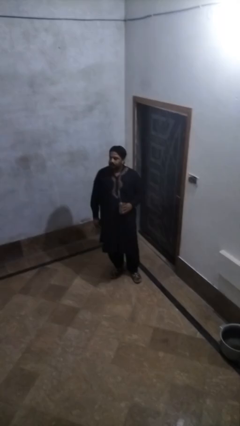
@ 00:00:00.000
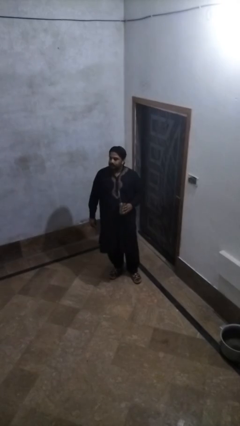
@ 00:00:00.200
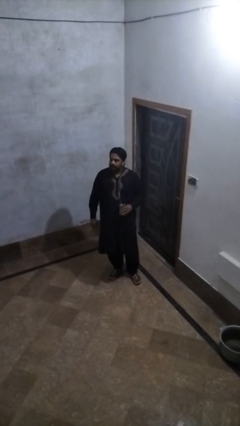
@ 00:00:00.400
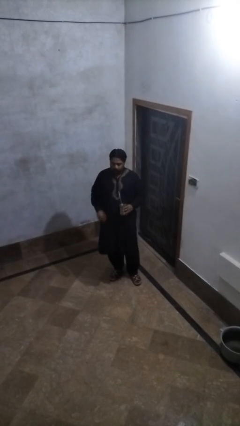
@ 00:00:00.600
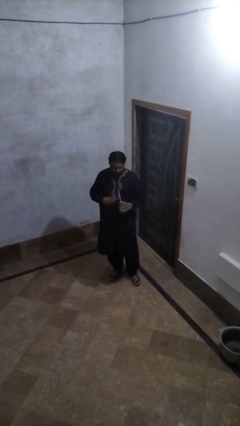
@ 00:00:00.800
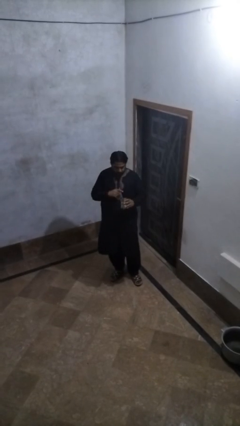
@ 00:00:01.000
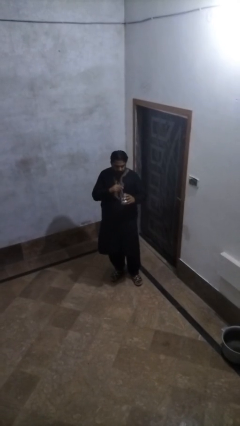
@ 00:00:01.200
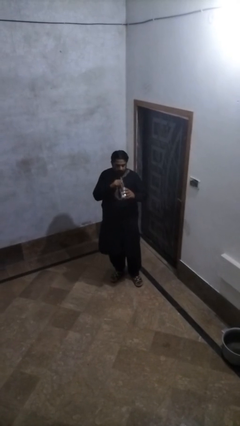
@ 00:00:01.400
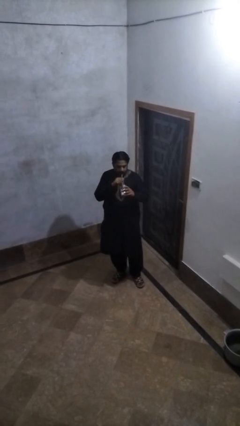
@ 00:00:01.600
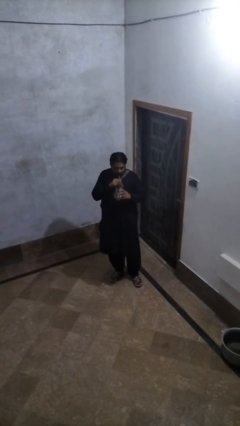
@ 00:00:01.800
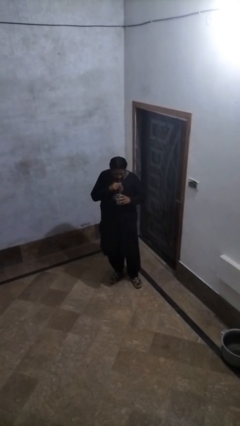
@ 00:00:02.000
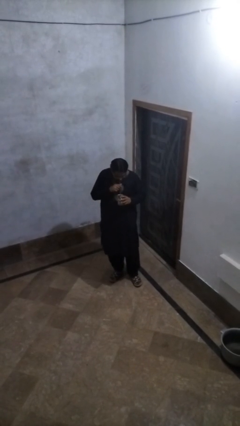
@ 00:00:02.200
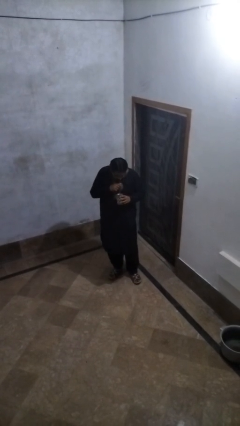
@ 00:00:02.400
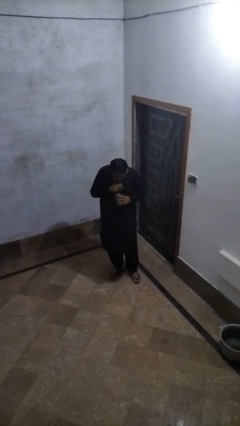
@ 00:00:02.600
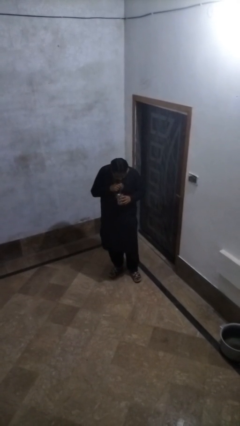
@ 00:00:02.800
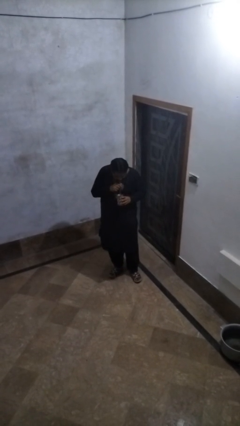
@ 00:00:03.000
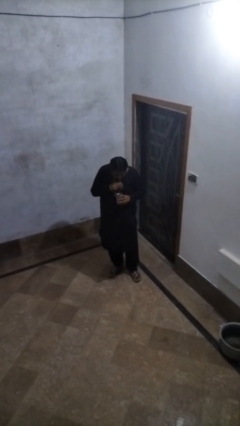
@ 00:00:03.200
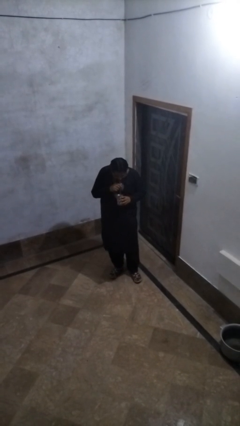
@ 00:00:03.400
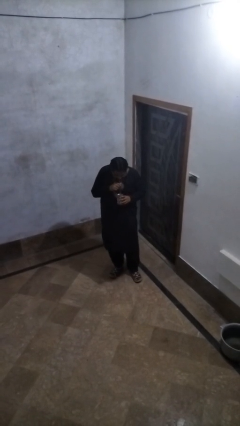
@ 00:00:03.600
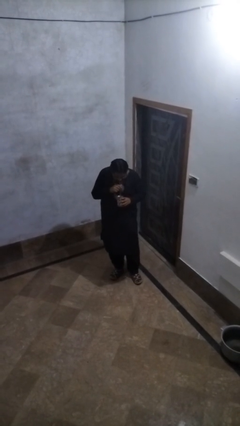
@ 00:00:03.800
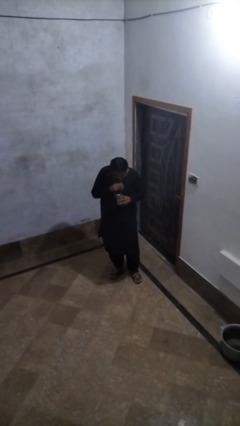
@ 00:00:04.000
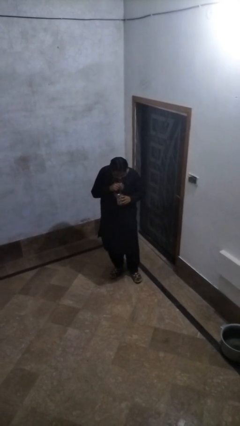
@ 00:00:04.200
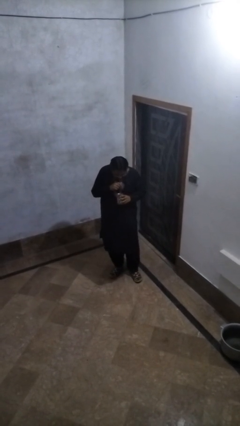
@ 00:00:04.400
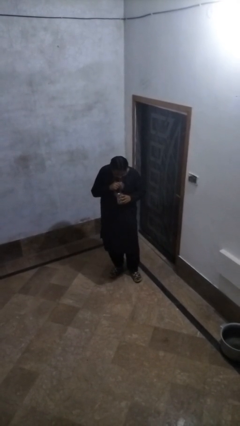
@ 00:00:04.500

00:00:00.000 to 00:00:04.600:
person drinks from straw

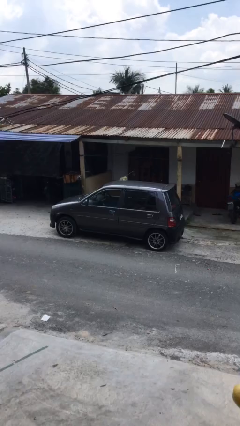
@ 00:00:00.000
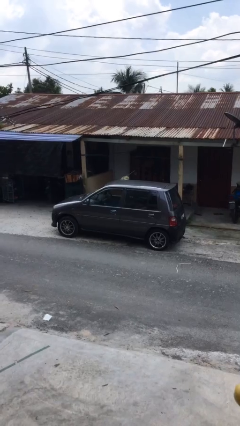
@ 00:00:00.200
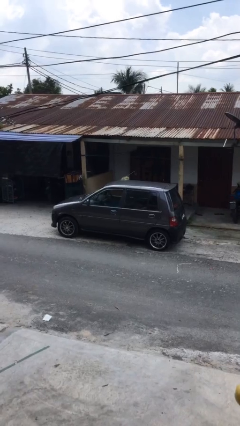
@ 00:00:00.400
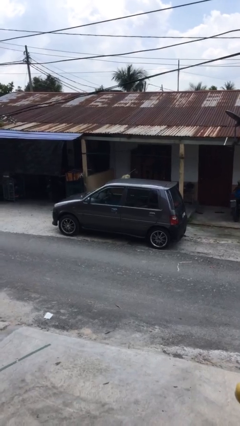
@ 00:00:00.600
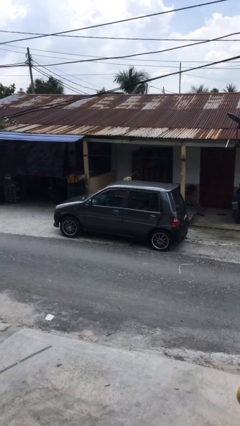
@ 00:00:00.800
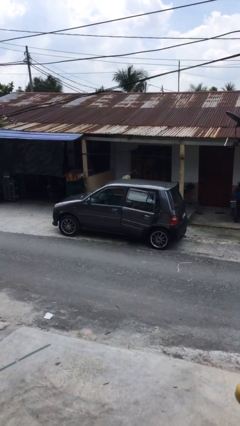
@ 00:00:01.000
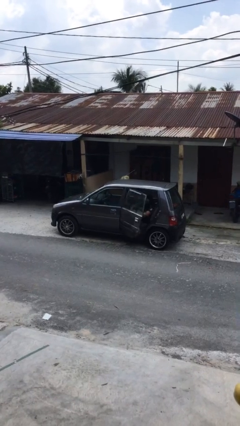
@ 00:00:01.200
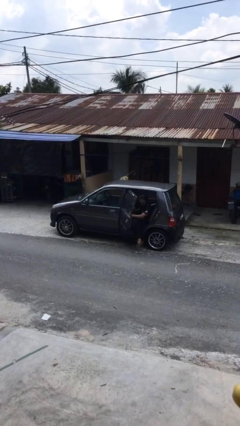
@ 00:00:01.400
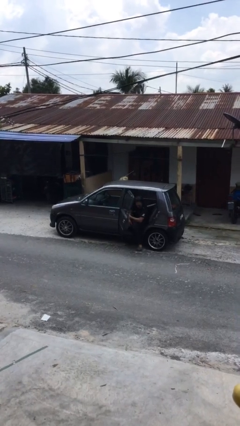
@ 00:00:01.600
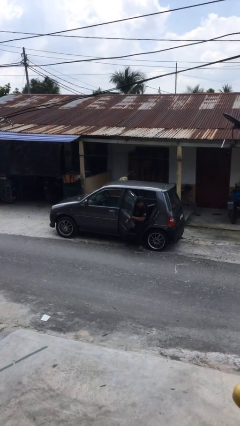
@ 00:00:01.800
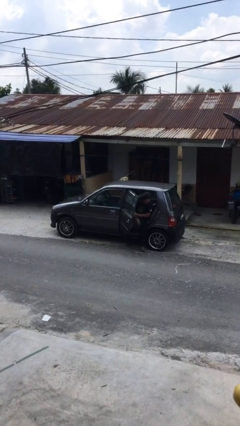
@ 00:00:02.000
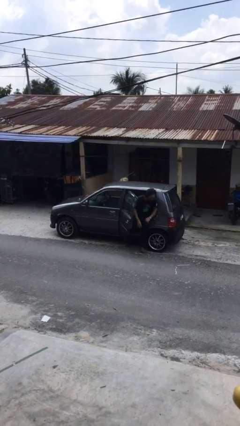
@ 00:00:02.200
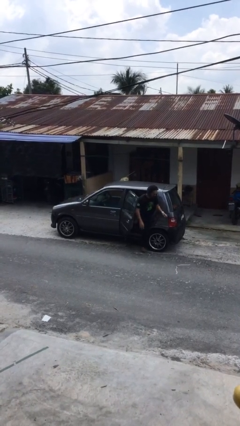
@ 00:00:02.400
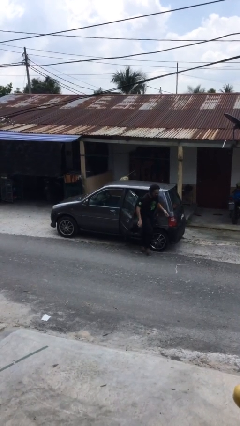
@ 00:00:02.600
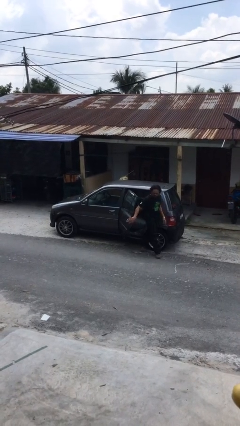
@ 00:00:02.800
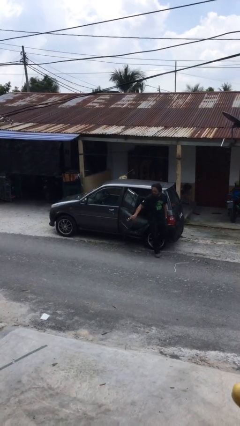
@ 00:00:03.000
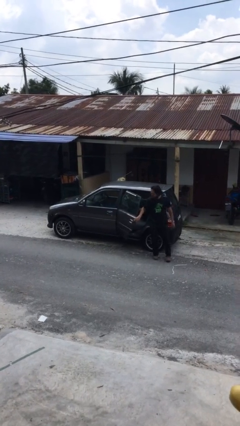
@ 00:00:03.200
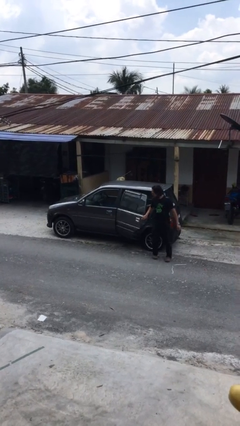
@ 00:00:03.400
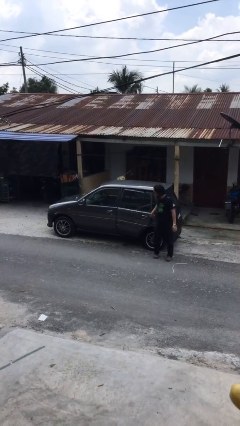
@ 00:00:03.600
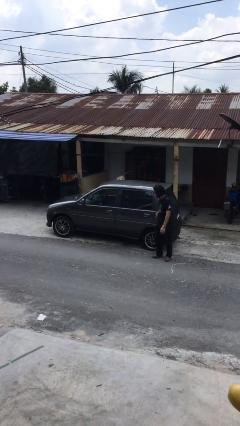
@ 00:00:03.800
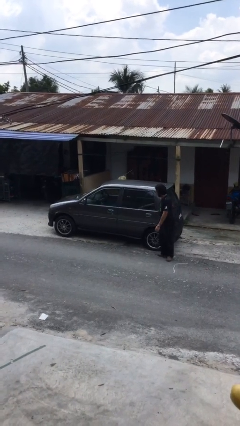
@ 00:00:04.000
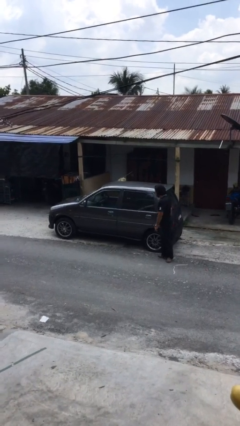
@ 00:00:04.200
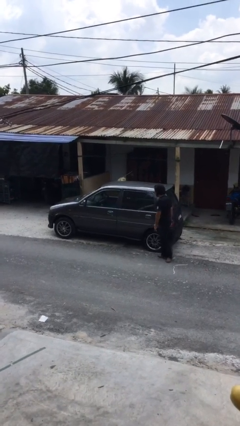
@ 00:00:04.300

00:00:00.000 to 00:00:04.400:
car drops off person

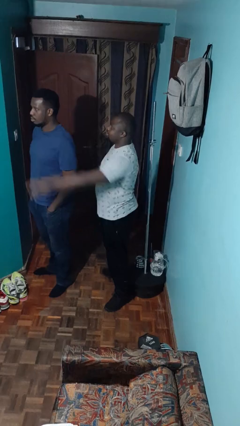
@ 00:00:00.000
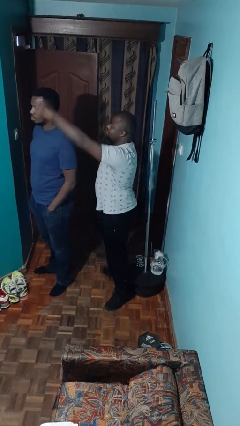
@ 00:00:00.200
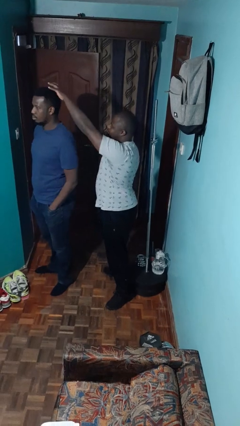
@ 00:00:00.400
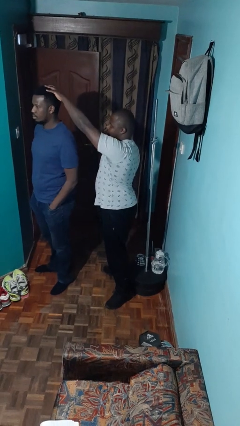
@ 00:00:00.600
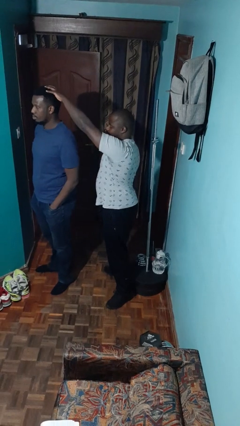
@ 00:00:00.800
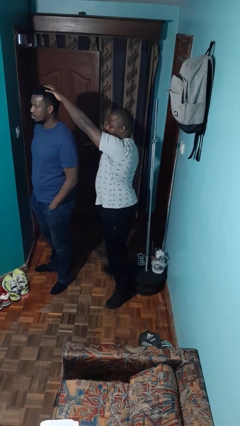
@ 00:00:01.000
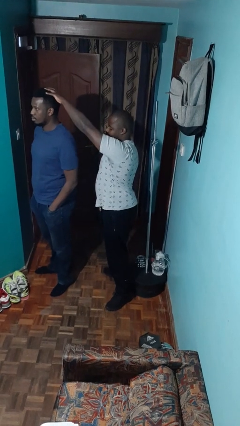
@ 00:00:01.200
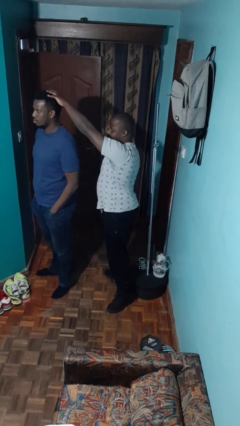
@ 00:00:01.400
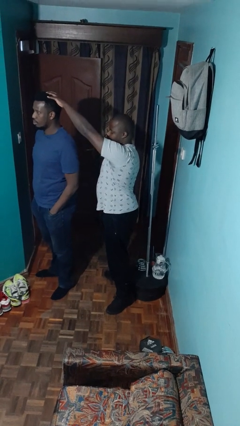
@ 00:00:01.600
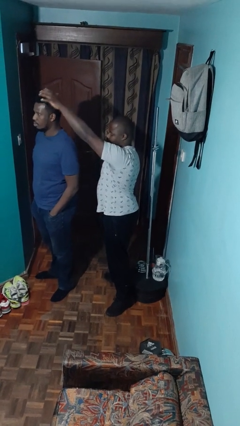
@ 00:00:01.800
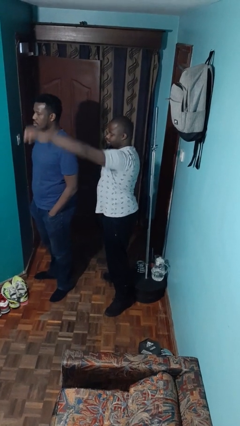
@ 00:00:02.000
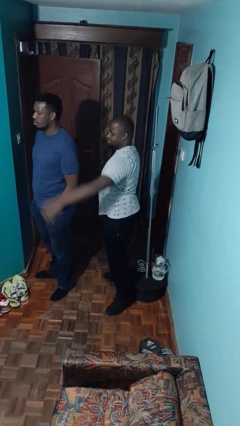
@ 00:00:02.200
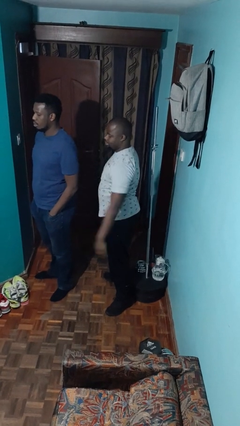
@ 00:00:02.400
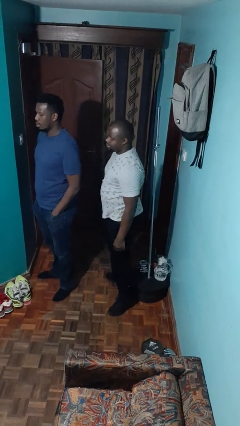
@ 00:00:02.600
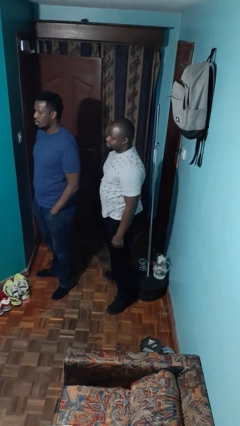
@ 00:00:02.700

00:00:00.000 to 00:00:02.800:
person grabs person by hair

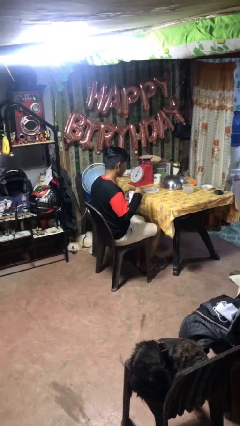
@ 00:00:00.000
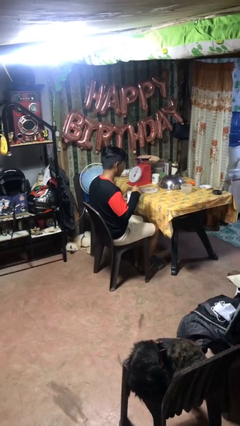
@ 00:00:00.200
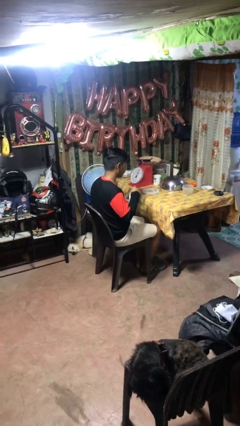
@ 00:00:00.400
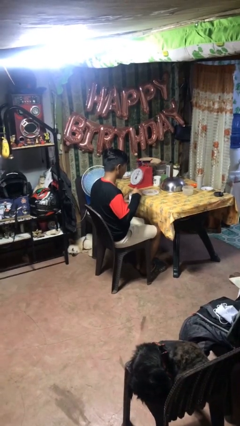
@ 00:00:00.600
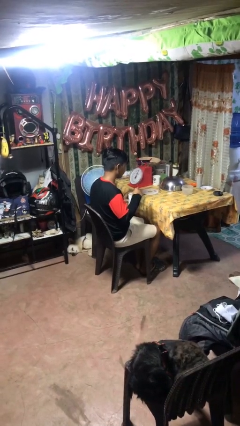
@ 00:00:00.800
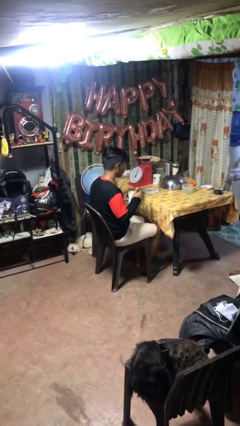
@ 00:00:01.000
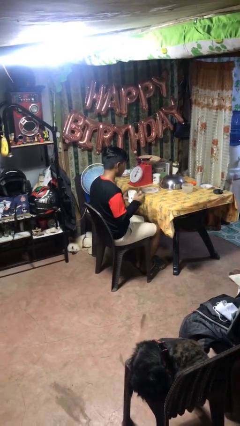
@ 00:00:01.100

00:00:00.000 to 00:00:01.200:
person stirs mug

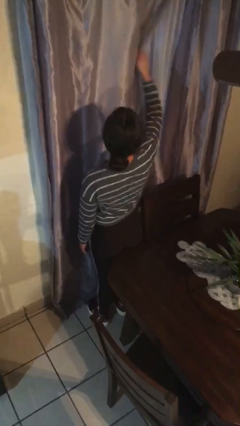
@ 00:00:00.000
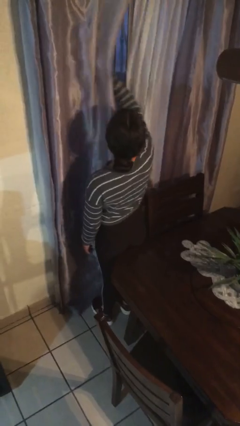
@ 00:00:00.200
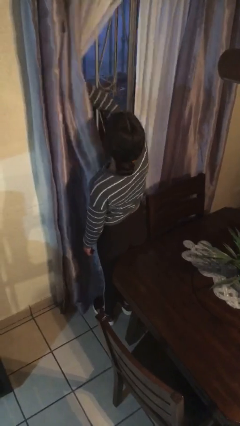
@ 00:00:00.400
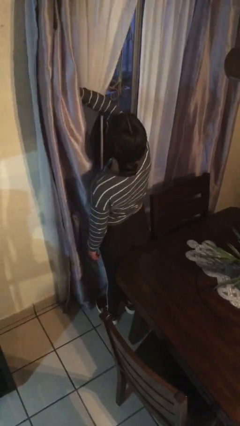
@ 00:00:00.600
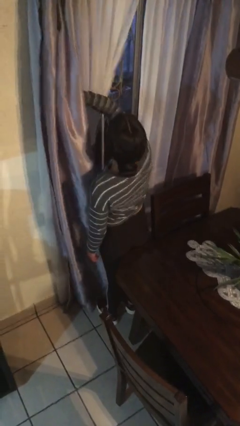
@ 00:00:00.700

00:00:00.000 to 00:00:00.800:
person opens curtains

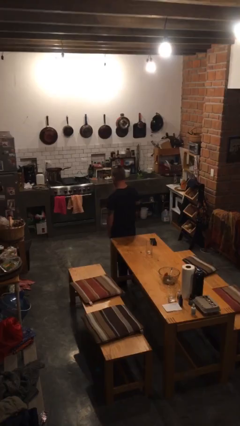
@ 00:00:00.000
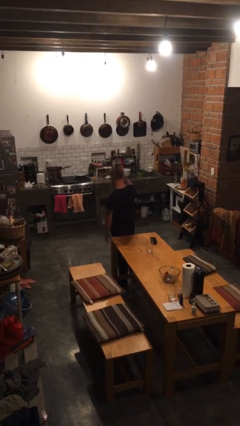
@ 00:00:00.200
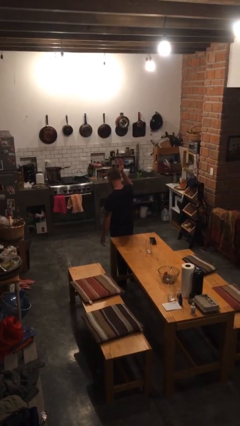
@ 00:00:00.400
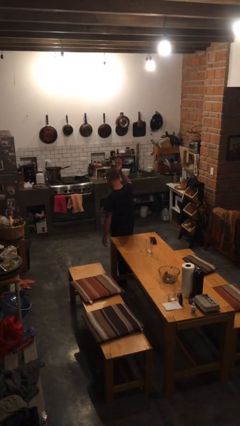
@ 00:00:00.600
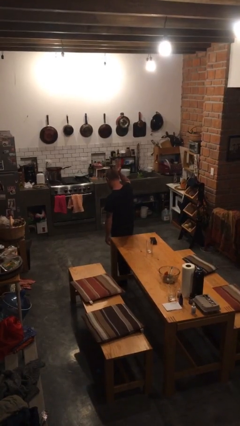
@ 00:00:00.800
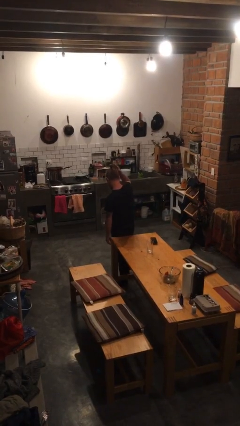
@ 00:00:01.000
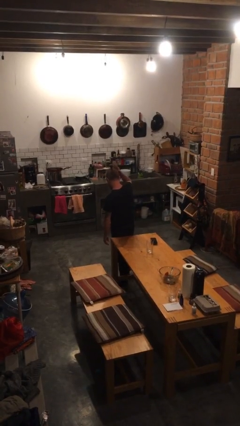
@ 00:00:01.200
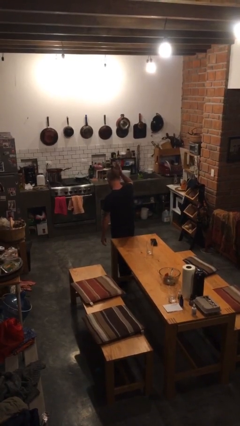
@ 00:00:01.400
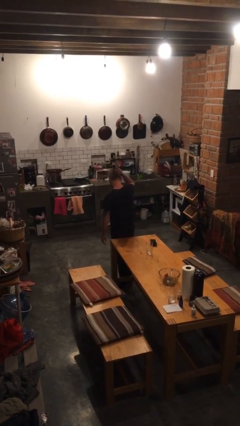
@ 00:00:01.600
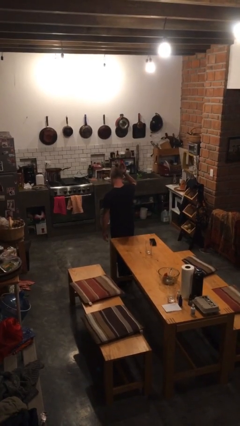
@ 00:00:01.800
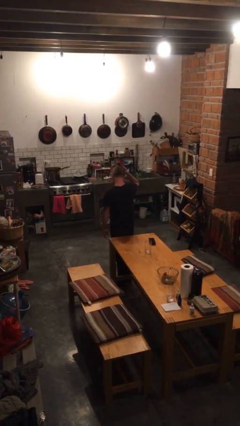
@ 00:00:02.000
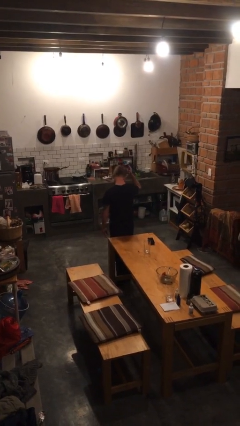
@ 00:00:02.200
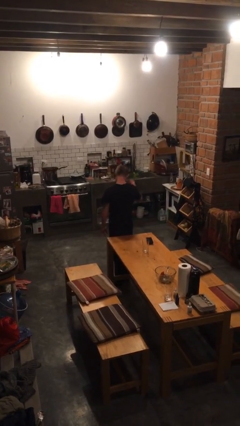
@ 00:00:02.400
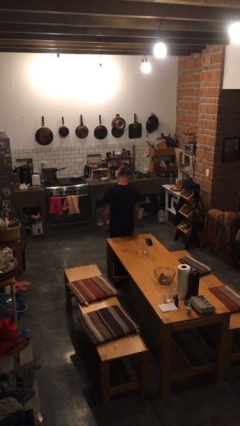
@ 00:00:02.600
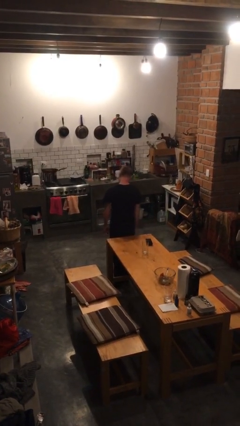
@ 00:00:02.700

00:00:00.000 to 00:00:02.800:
person pats head

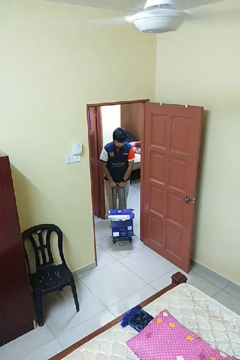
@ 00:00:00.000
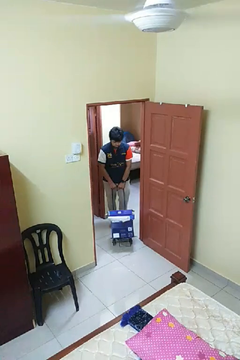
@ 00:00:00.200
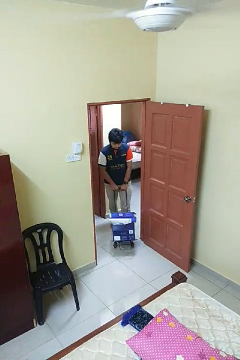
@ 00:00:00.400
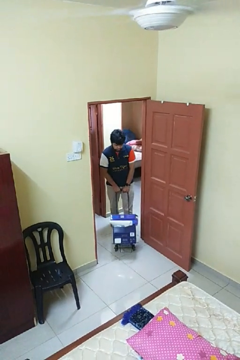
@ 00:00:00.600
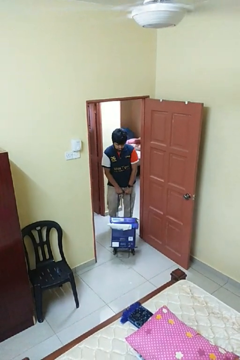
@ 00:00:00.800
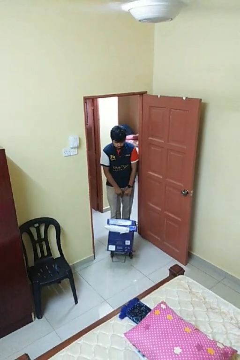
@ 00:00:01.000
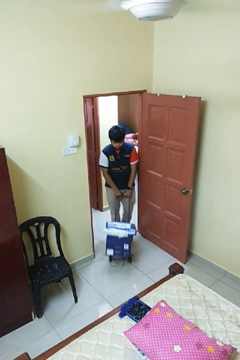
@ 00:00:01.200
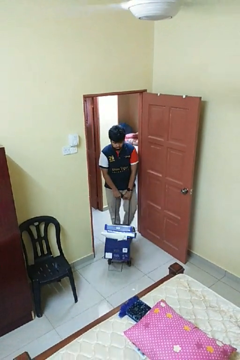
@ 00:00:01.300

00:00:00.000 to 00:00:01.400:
person pushes wheeled cart
